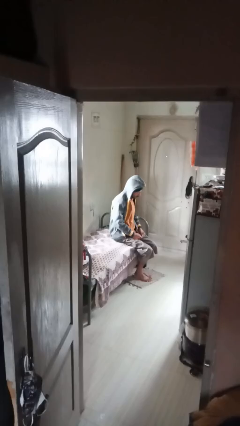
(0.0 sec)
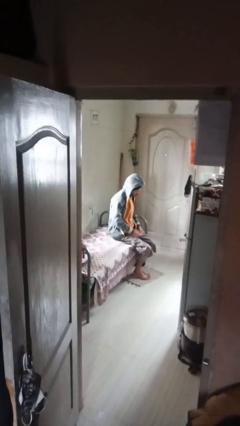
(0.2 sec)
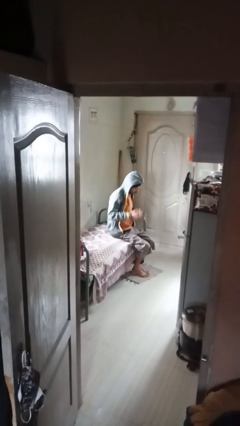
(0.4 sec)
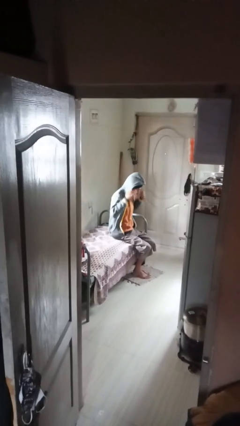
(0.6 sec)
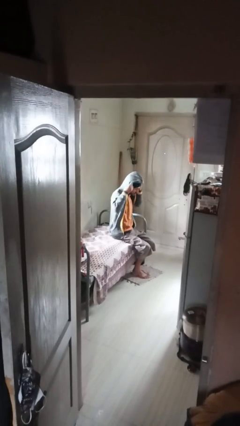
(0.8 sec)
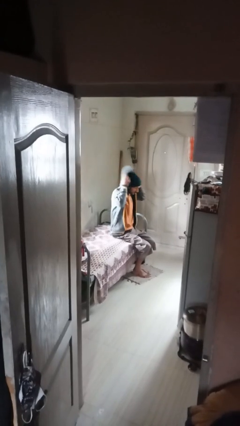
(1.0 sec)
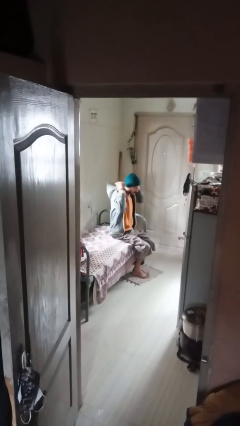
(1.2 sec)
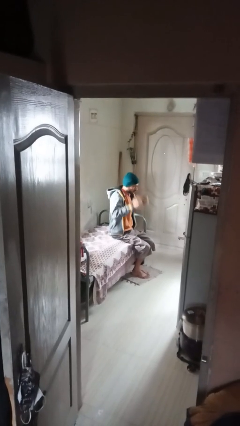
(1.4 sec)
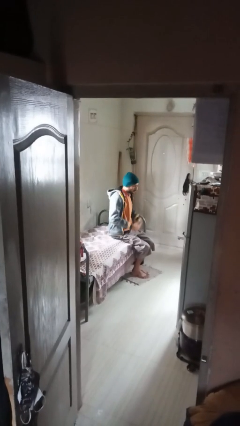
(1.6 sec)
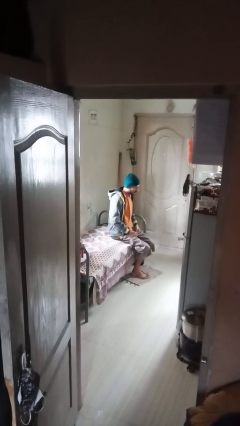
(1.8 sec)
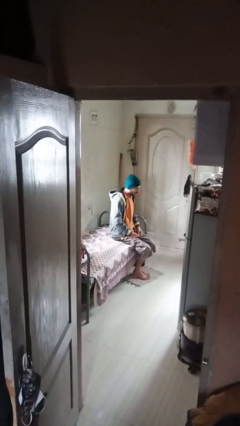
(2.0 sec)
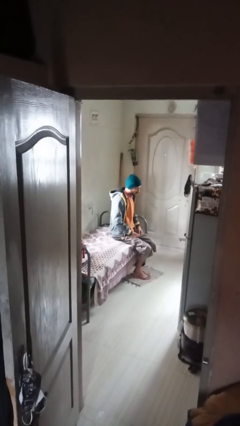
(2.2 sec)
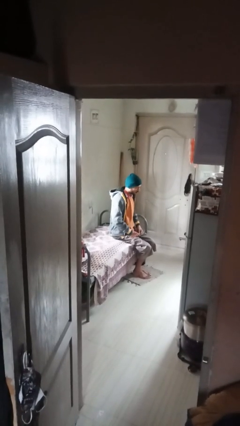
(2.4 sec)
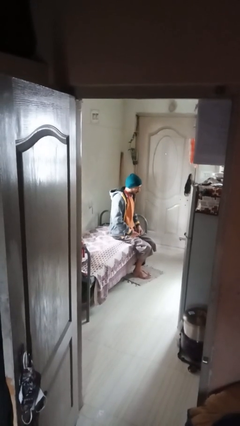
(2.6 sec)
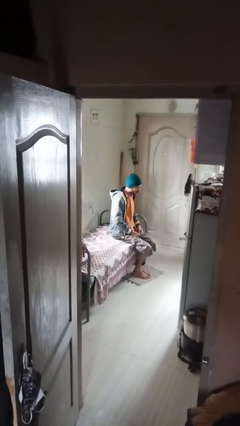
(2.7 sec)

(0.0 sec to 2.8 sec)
person takes off hoodie

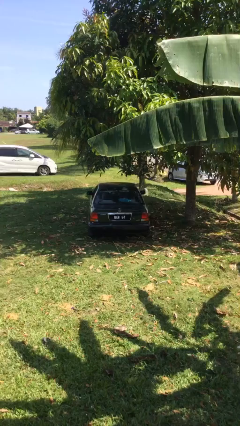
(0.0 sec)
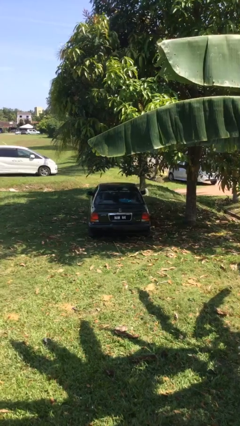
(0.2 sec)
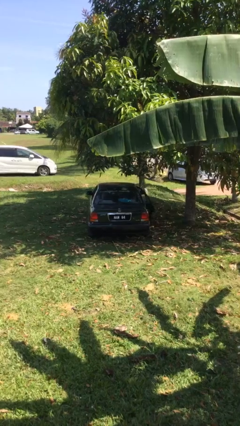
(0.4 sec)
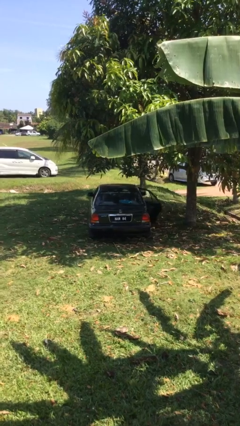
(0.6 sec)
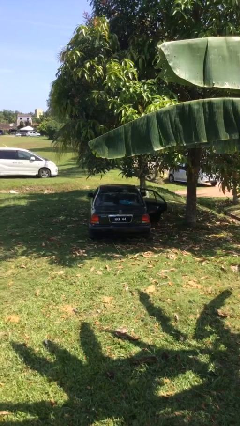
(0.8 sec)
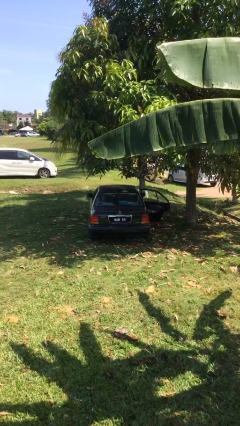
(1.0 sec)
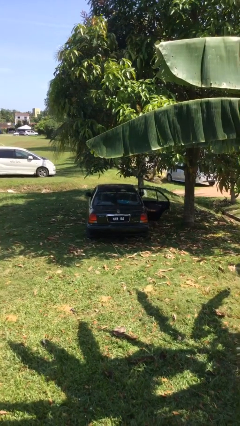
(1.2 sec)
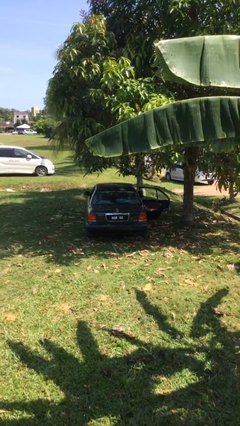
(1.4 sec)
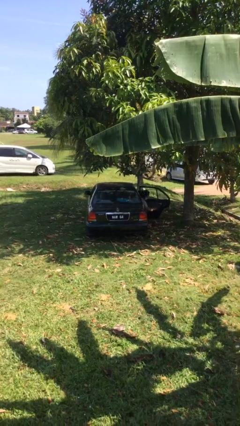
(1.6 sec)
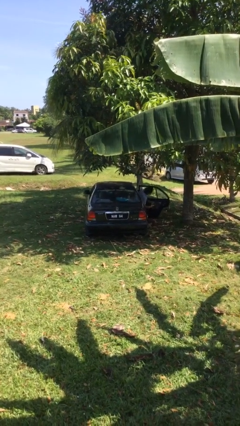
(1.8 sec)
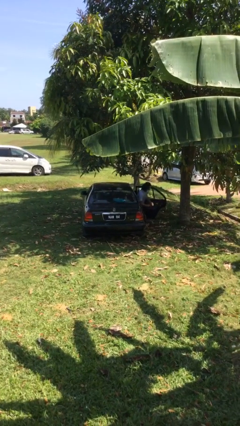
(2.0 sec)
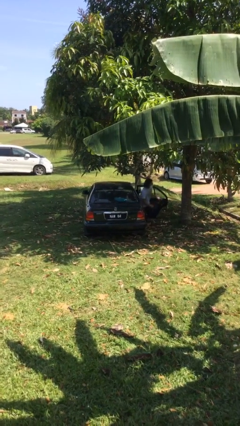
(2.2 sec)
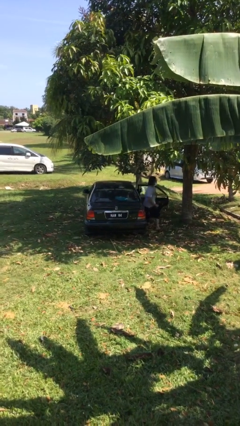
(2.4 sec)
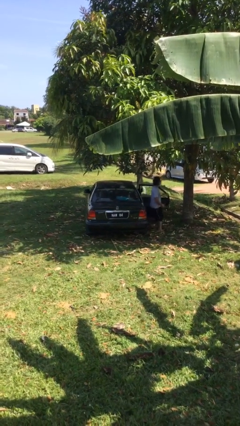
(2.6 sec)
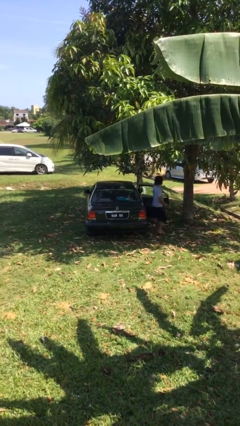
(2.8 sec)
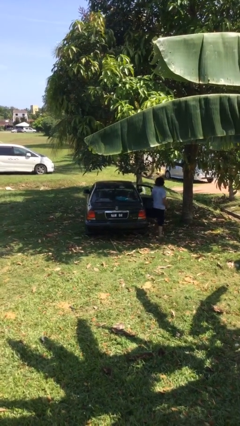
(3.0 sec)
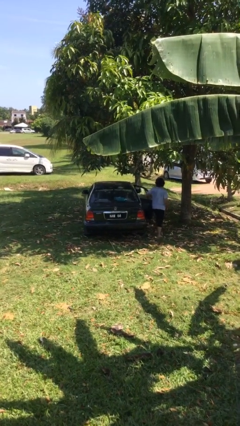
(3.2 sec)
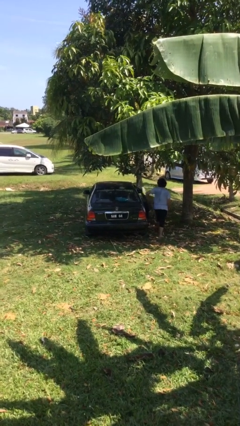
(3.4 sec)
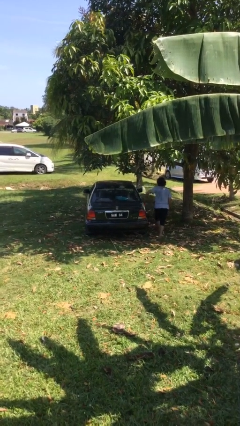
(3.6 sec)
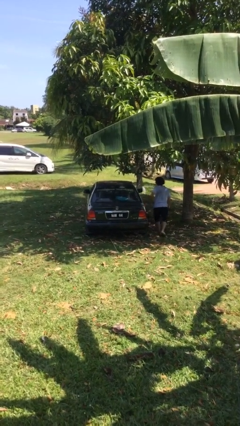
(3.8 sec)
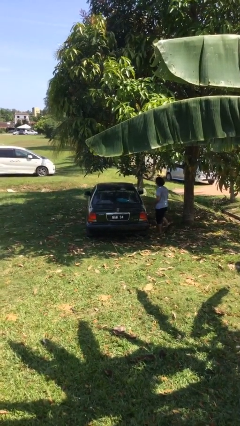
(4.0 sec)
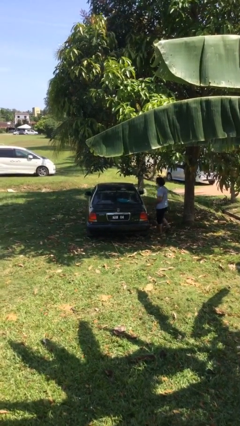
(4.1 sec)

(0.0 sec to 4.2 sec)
car drops off person

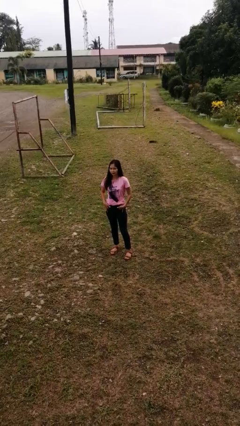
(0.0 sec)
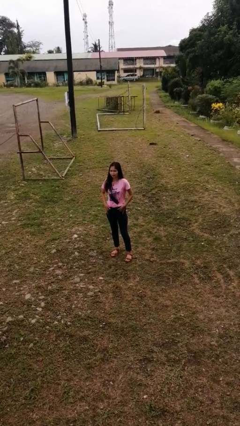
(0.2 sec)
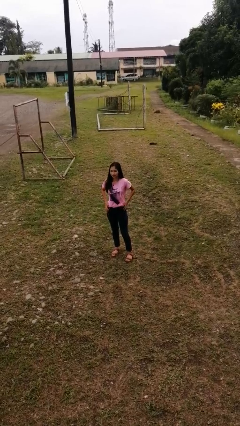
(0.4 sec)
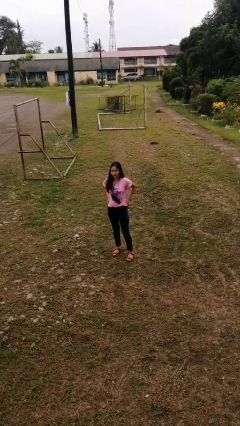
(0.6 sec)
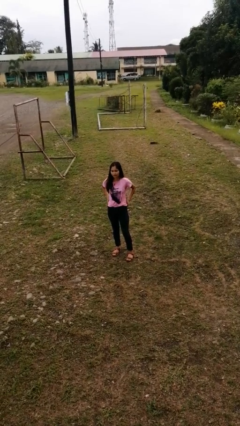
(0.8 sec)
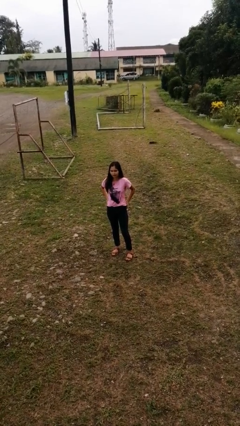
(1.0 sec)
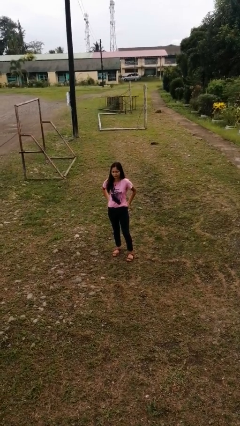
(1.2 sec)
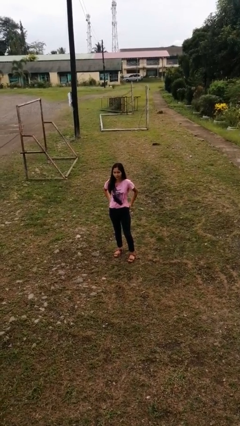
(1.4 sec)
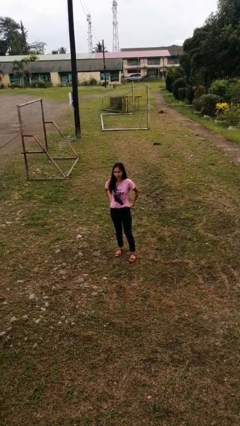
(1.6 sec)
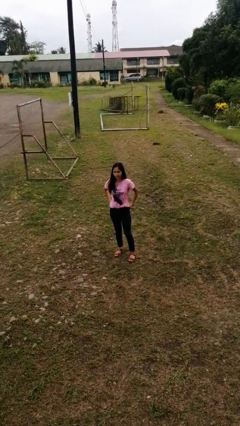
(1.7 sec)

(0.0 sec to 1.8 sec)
person puts hands in back pockets

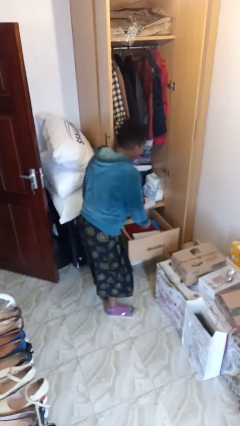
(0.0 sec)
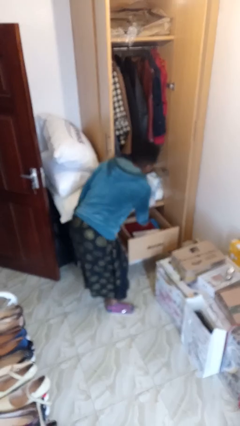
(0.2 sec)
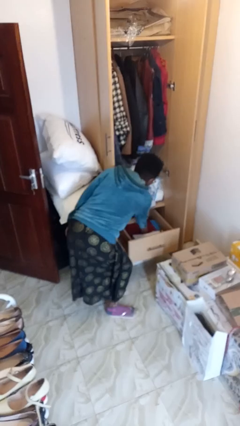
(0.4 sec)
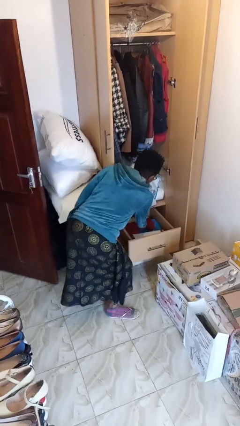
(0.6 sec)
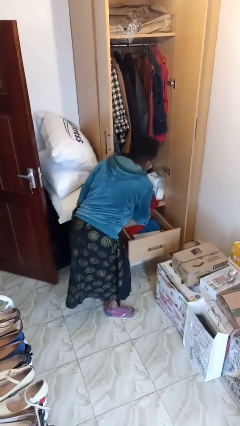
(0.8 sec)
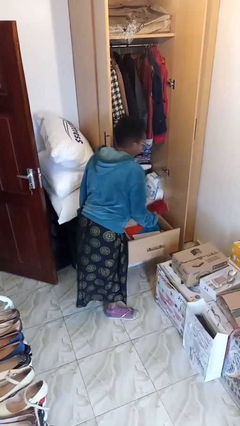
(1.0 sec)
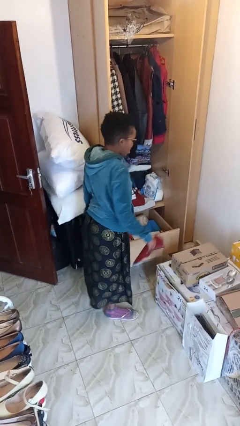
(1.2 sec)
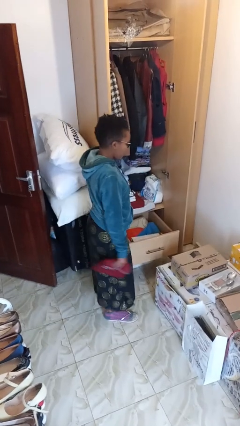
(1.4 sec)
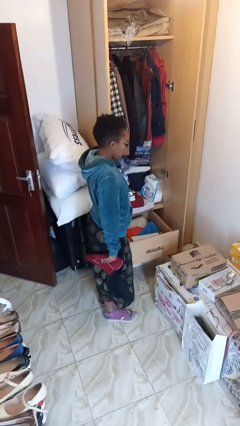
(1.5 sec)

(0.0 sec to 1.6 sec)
person takes clothes from dresser

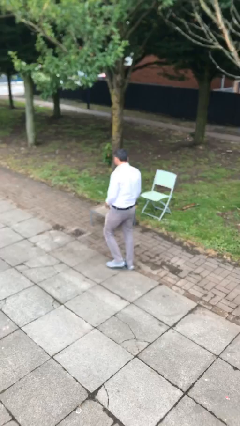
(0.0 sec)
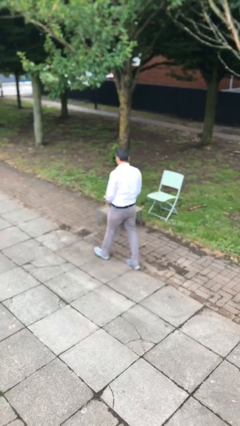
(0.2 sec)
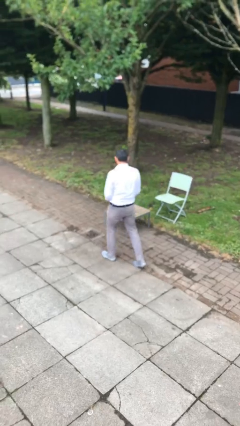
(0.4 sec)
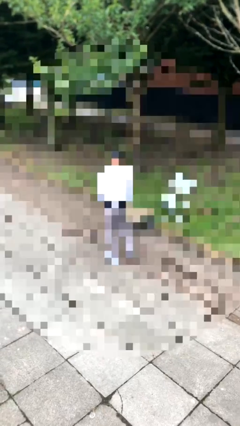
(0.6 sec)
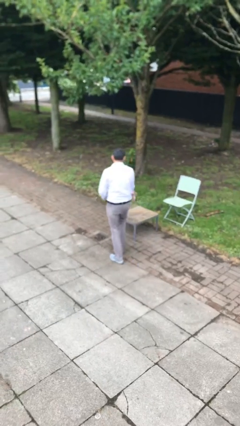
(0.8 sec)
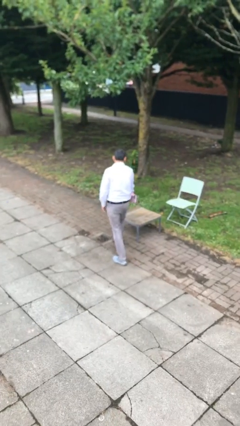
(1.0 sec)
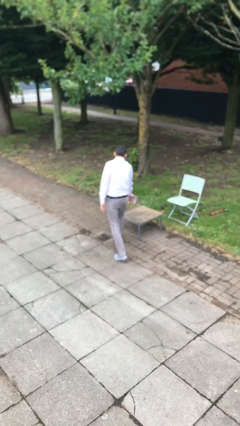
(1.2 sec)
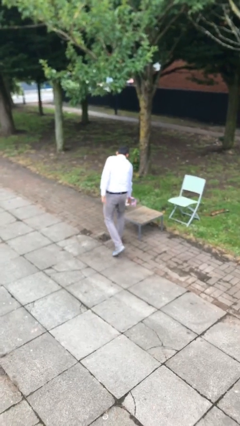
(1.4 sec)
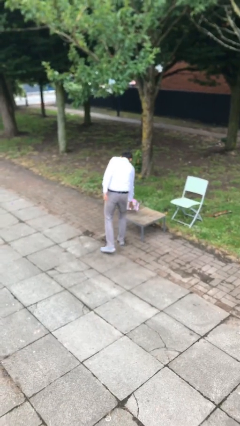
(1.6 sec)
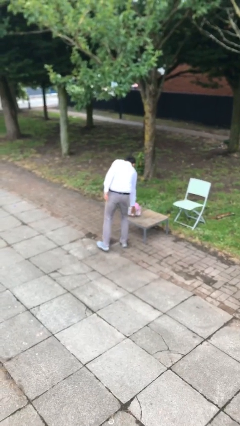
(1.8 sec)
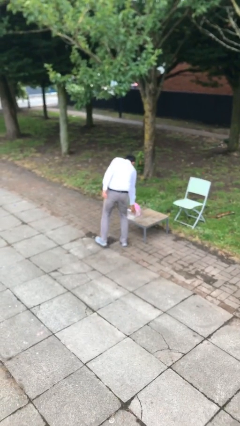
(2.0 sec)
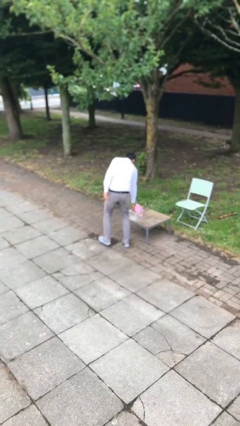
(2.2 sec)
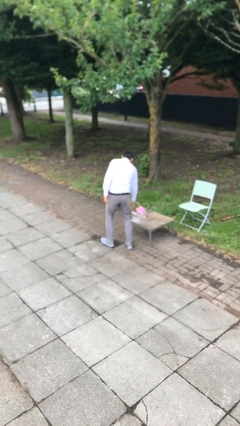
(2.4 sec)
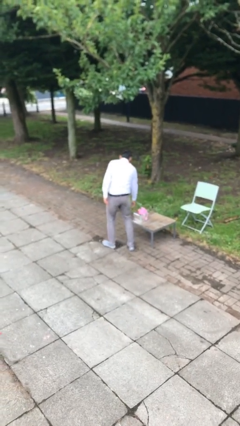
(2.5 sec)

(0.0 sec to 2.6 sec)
person puts down object on table

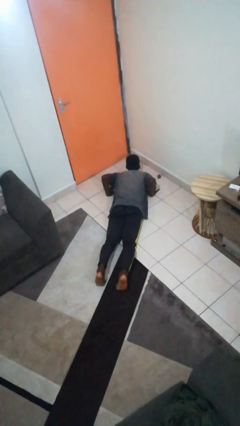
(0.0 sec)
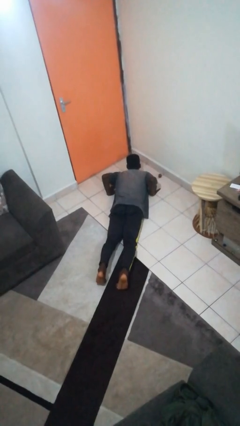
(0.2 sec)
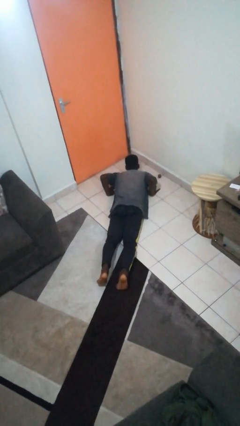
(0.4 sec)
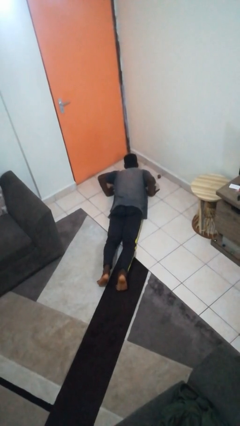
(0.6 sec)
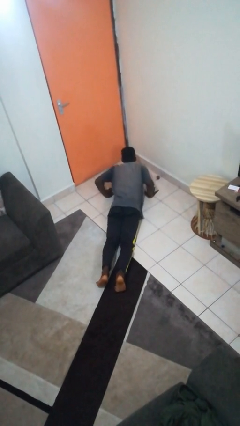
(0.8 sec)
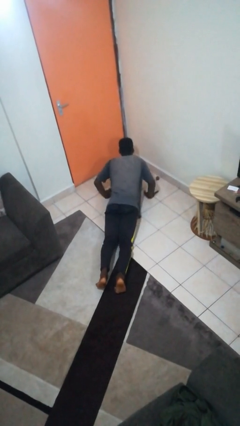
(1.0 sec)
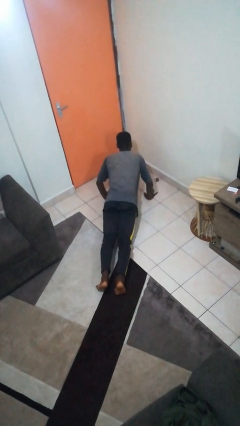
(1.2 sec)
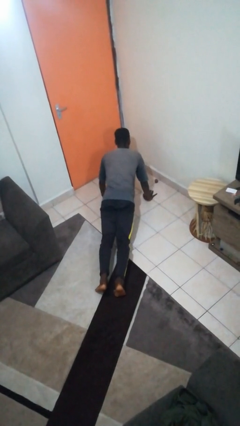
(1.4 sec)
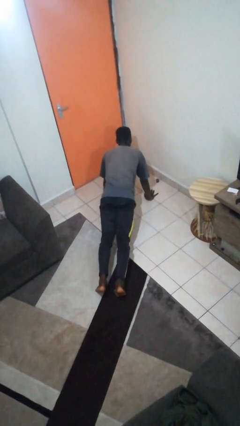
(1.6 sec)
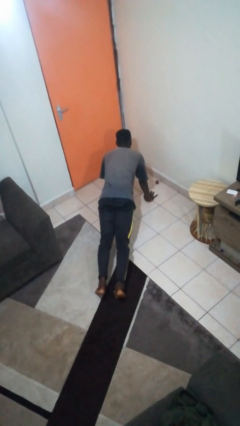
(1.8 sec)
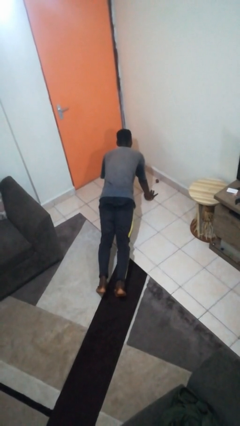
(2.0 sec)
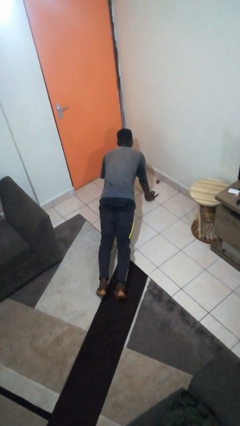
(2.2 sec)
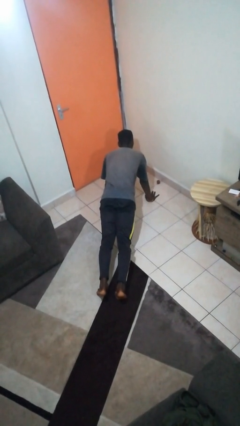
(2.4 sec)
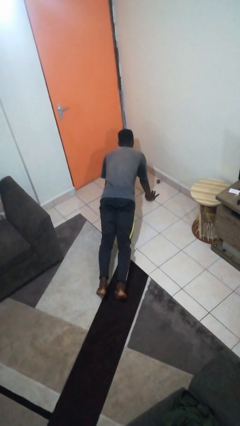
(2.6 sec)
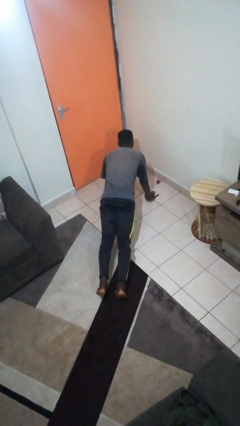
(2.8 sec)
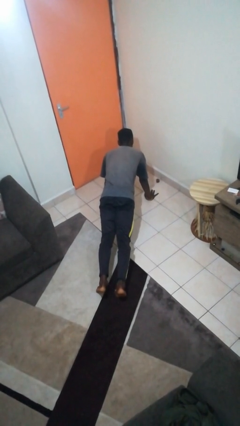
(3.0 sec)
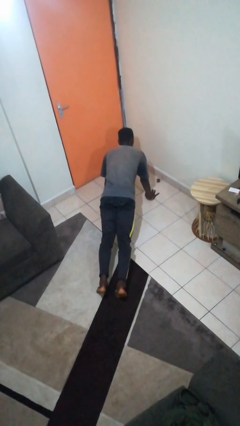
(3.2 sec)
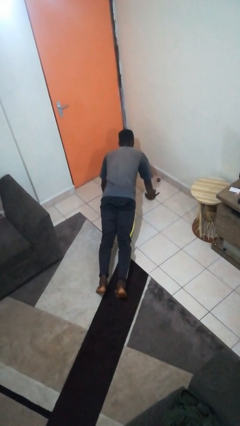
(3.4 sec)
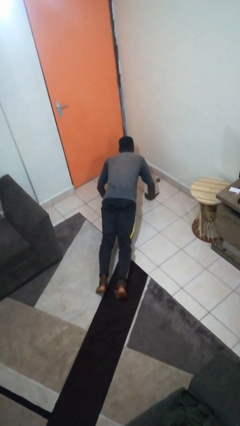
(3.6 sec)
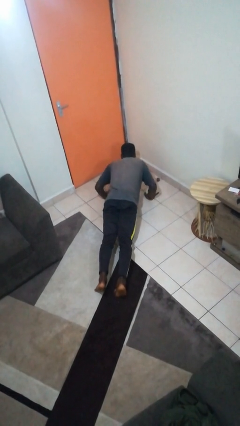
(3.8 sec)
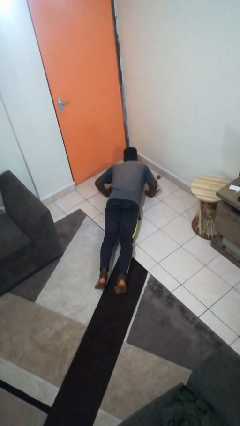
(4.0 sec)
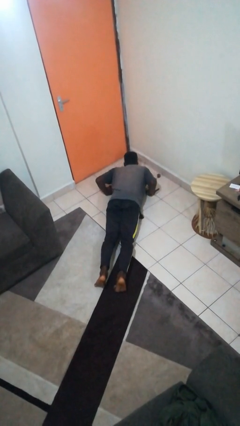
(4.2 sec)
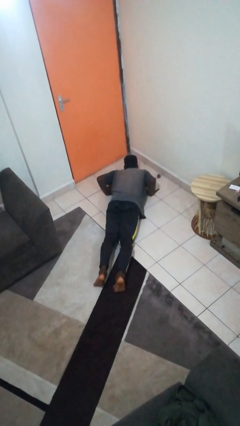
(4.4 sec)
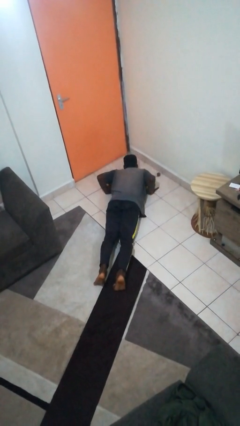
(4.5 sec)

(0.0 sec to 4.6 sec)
person exercises with pushup
